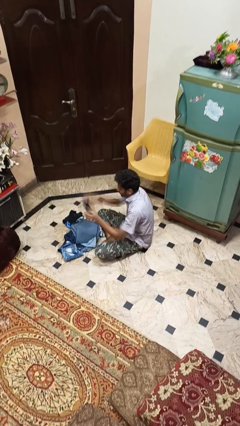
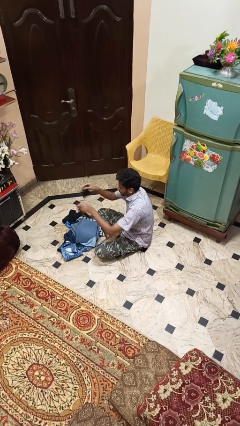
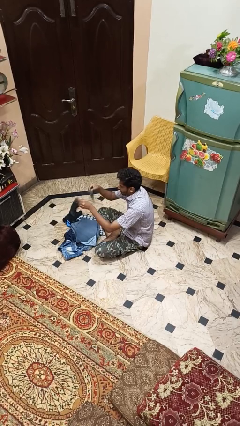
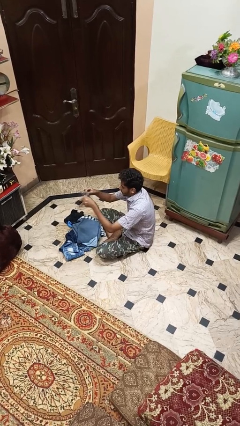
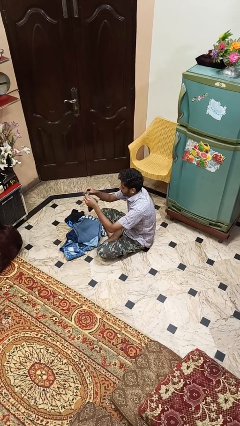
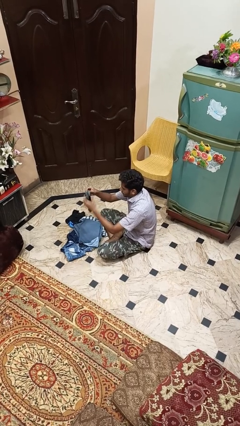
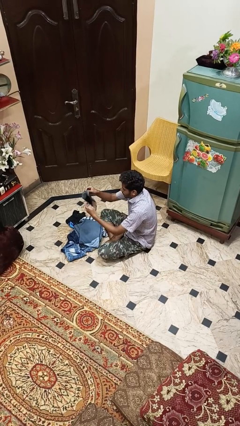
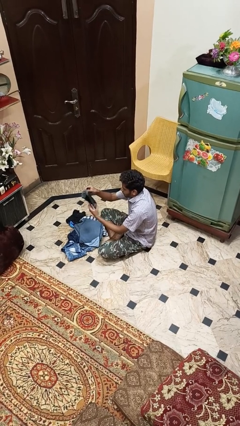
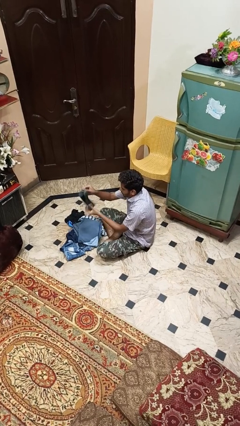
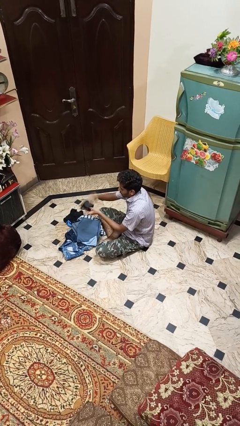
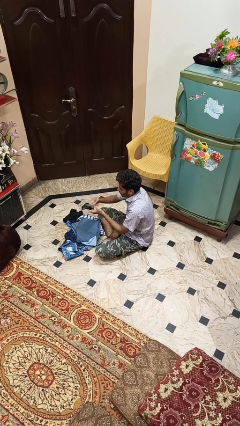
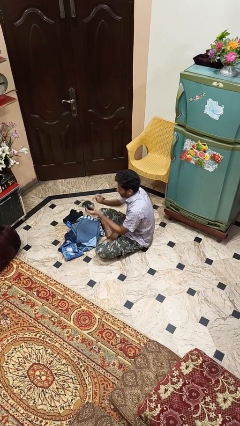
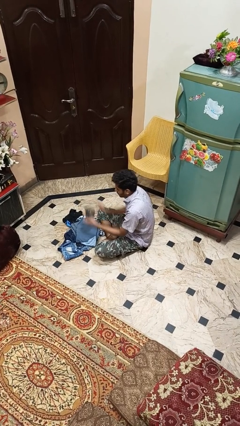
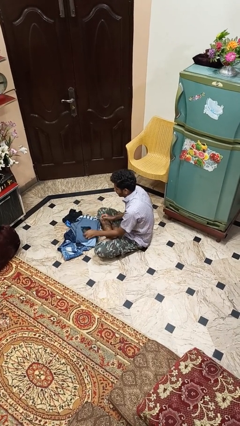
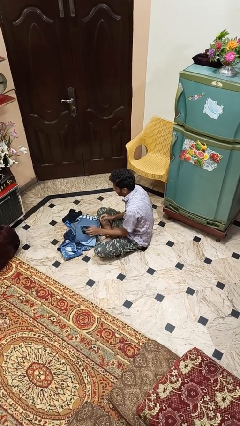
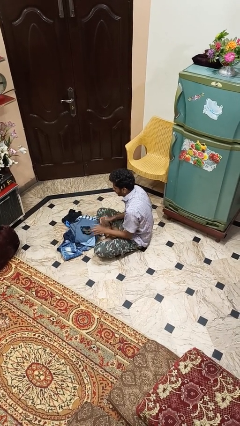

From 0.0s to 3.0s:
person folds socks

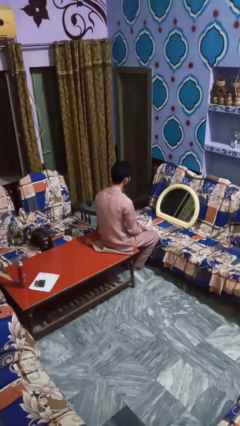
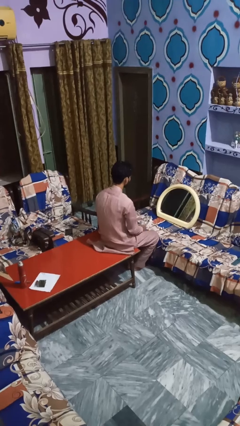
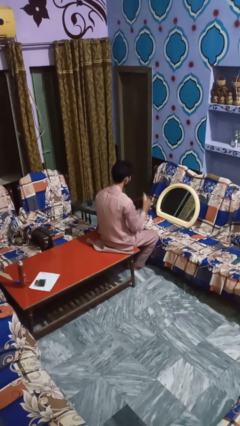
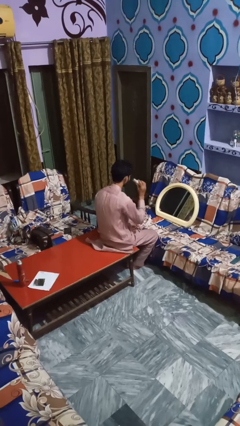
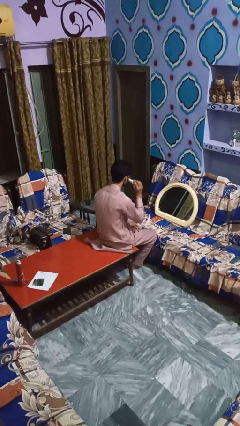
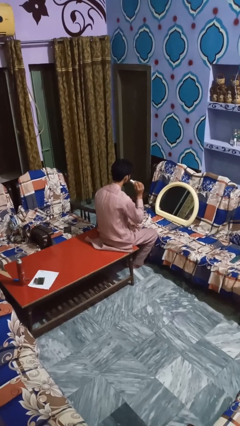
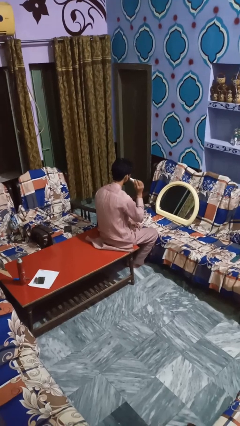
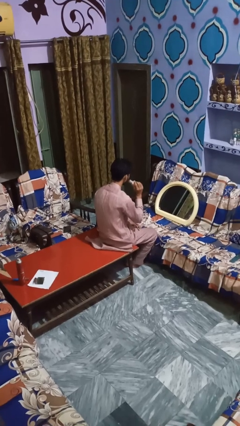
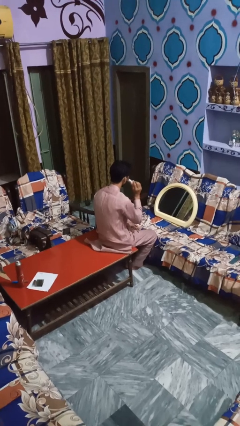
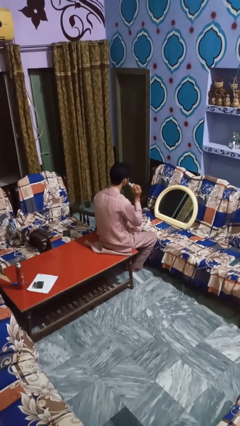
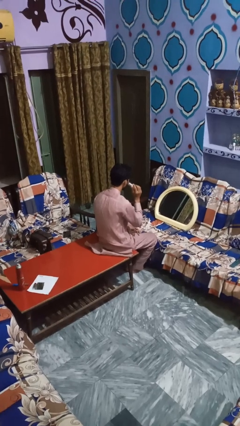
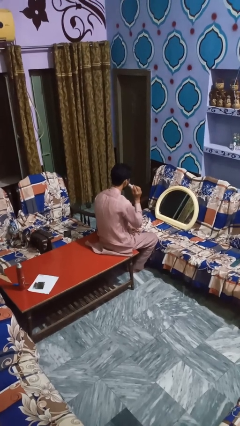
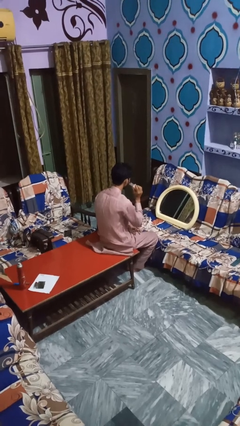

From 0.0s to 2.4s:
person applies foundation makeup

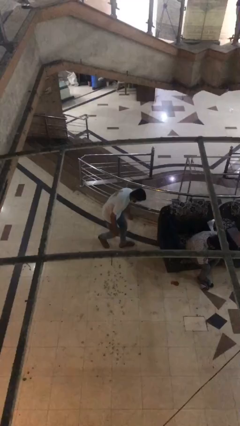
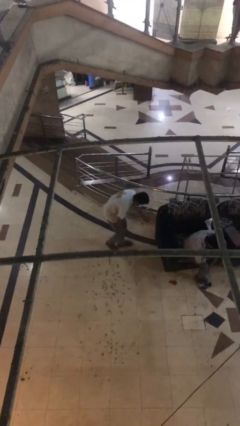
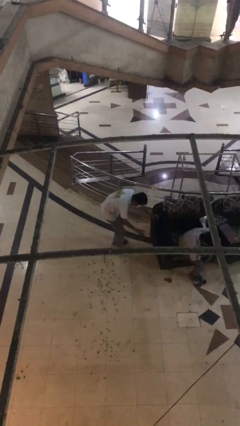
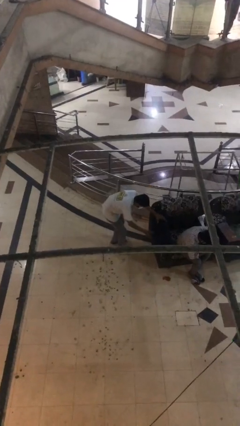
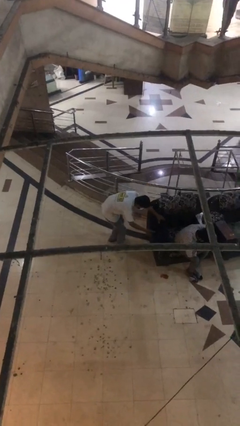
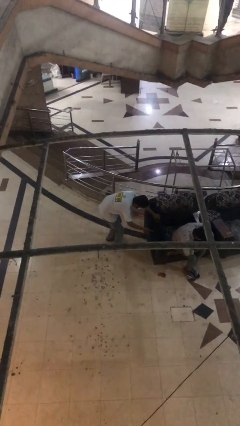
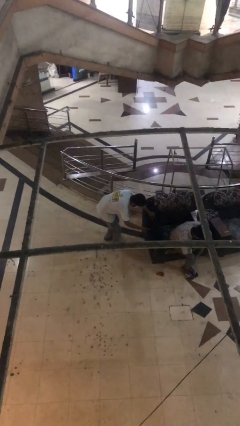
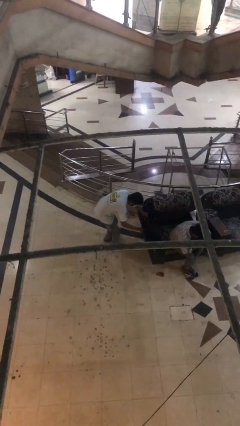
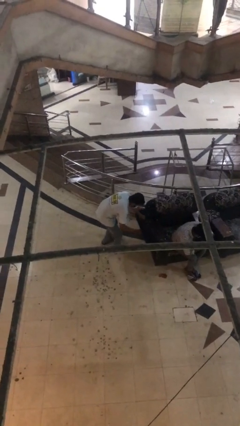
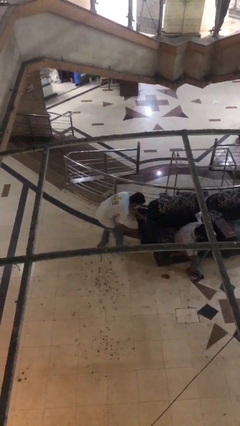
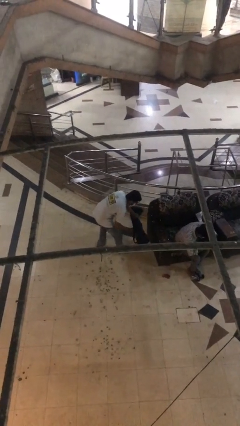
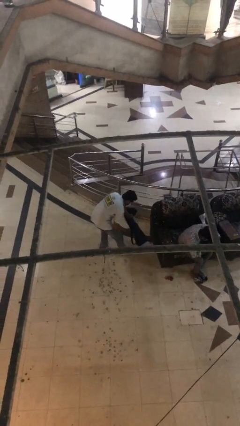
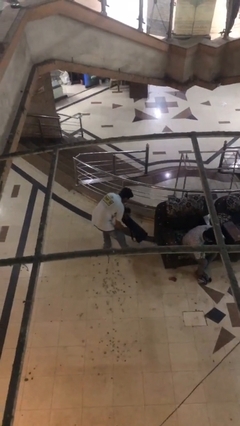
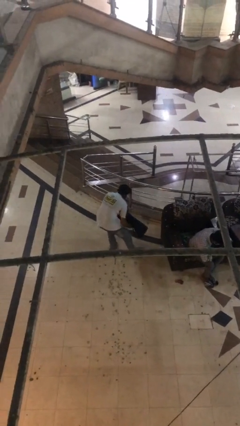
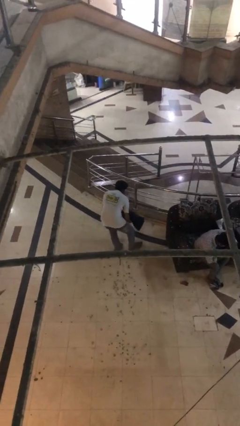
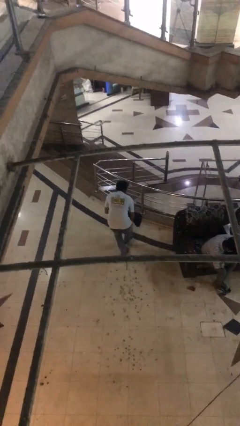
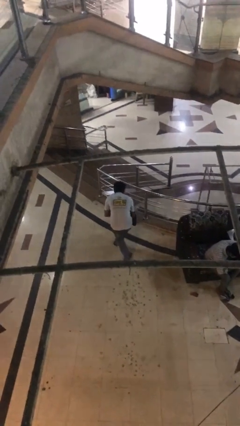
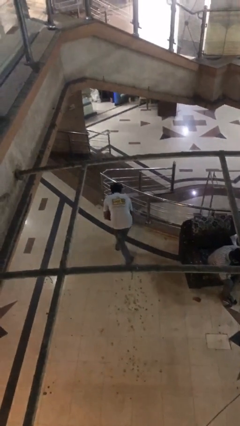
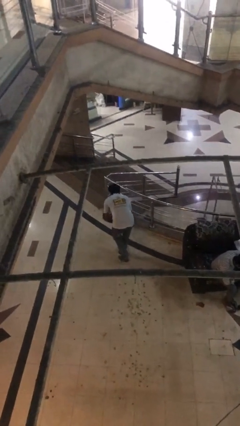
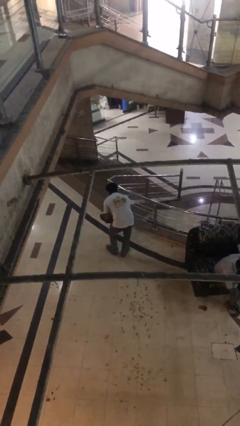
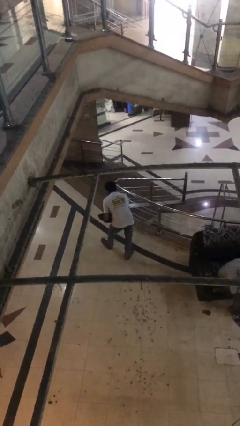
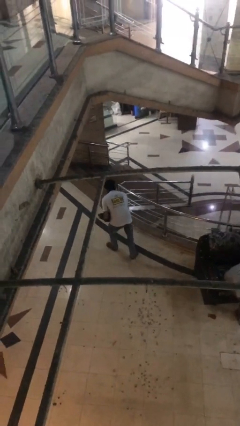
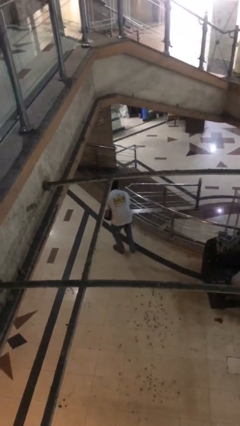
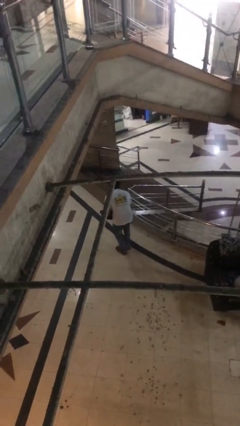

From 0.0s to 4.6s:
person steals object from person

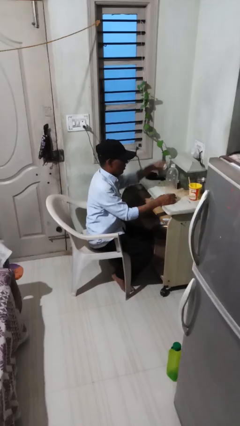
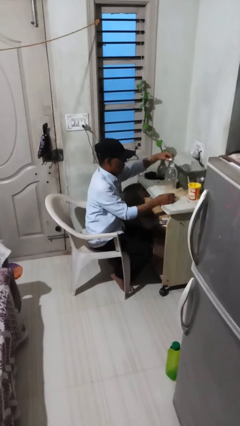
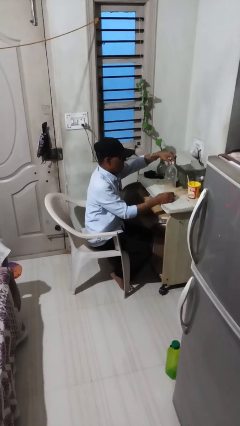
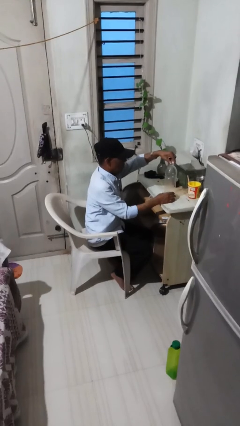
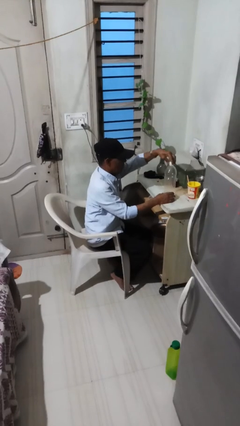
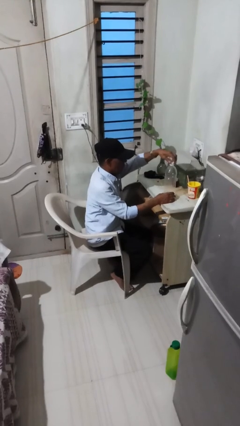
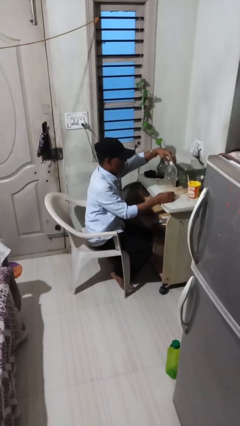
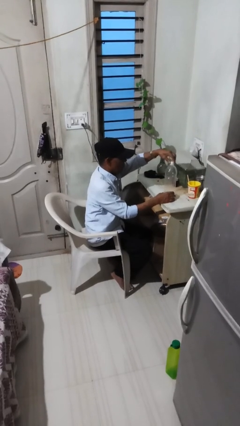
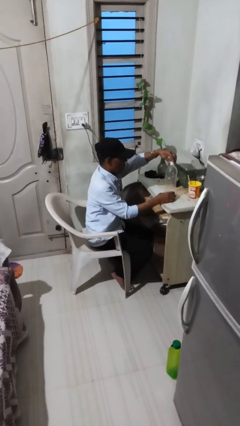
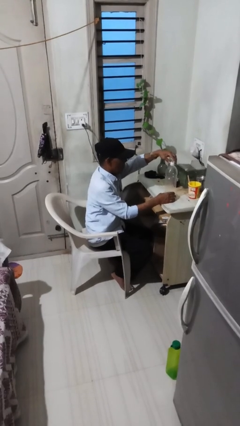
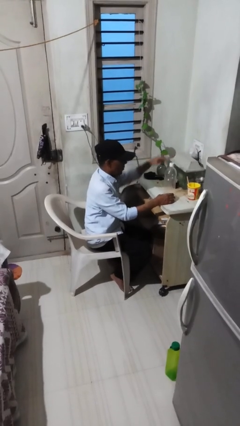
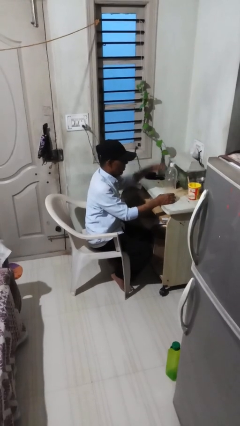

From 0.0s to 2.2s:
person screws lid to bottle

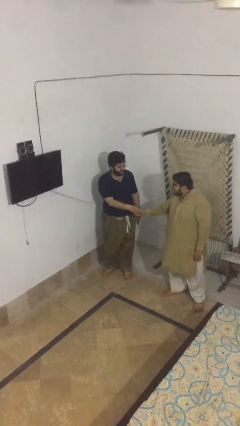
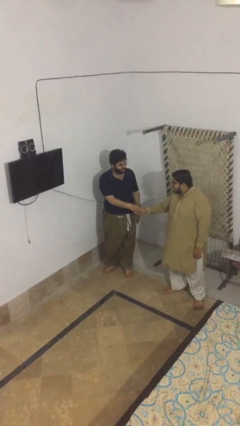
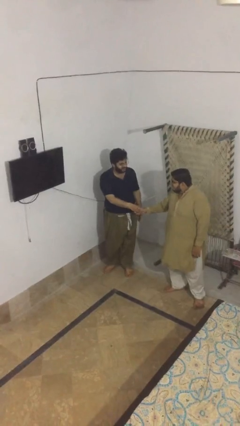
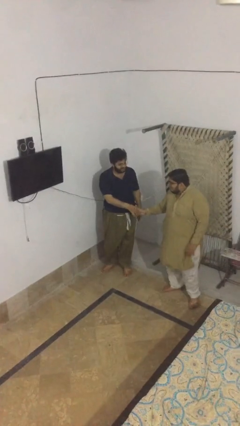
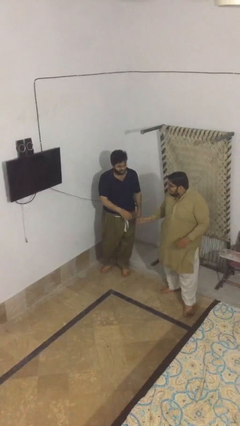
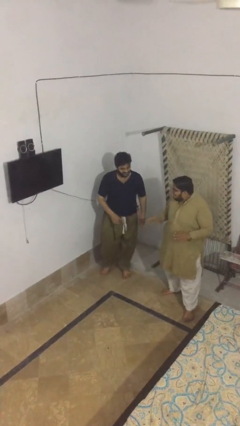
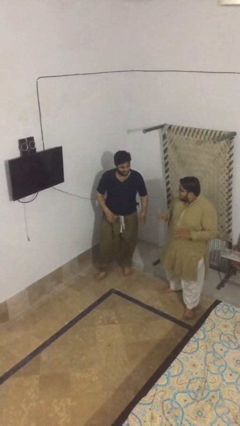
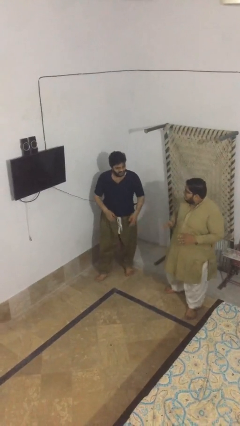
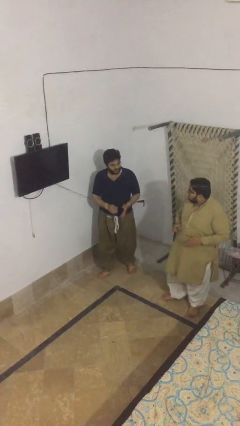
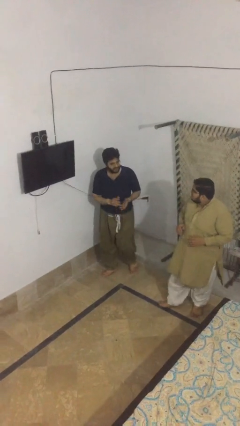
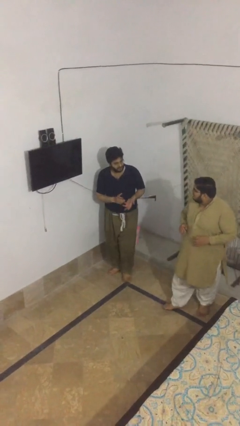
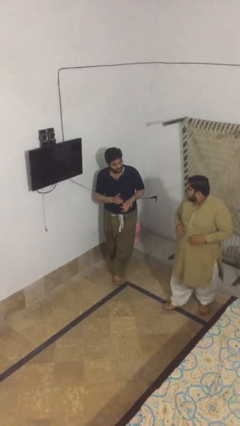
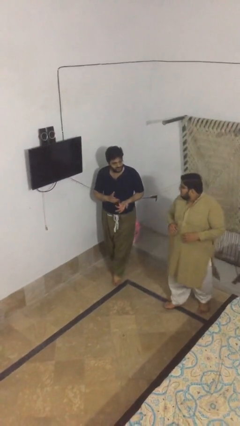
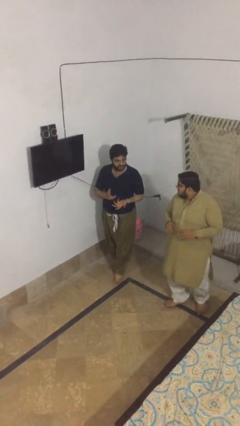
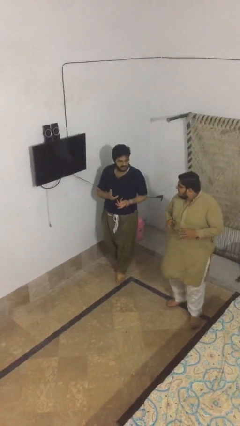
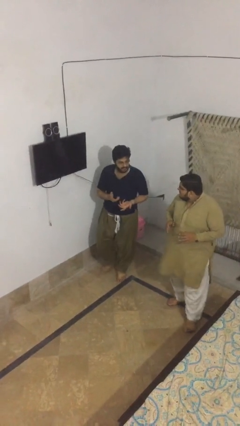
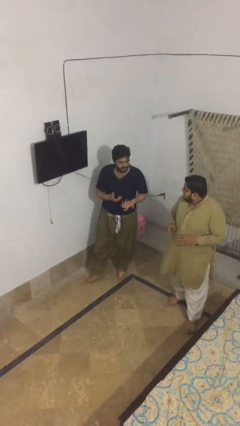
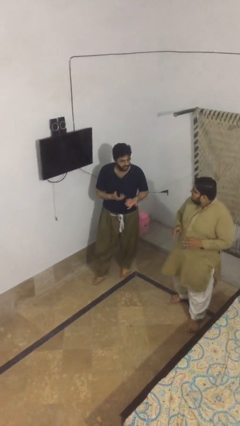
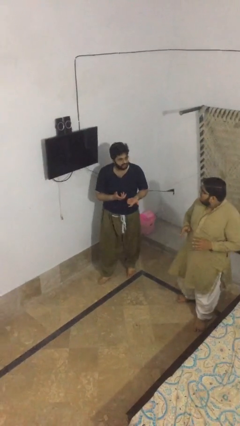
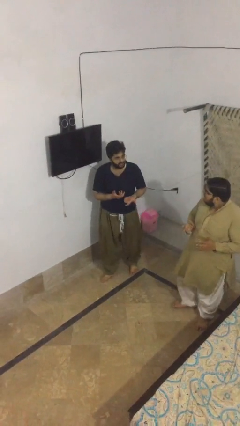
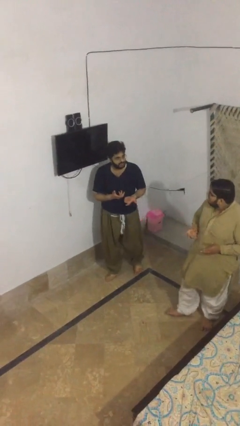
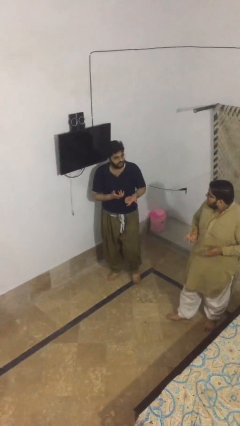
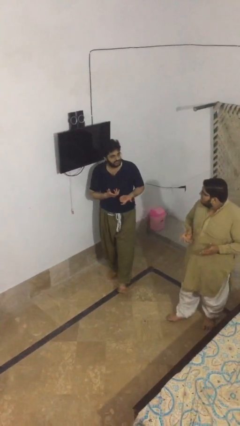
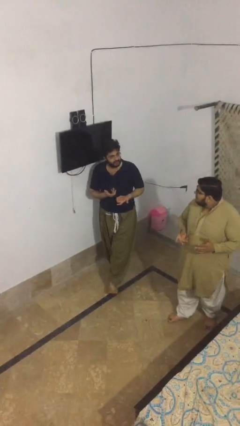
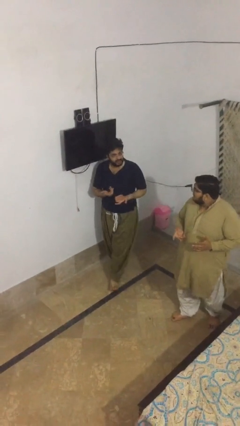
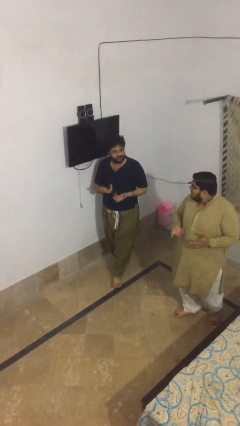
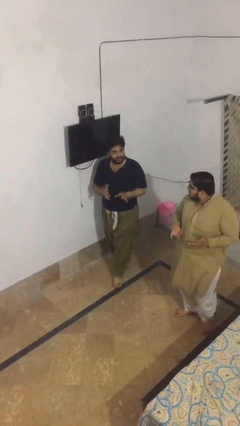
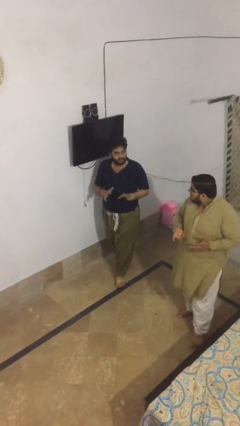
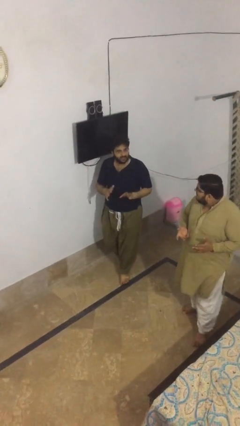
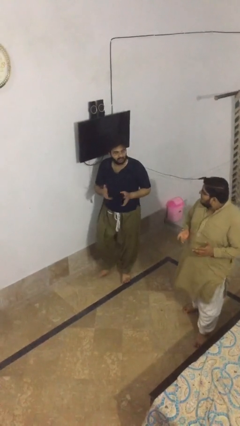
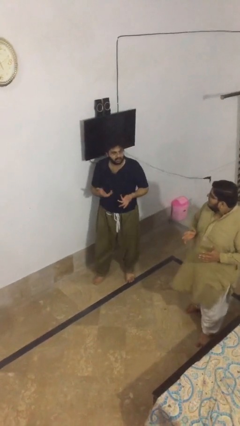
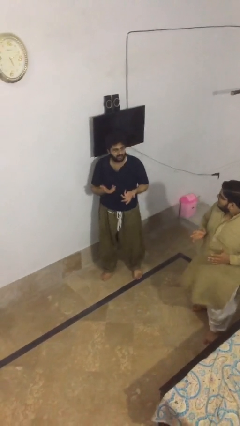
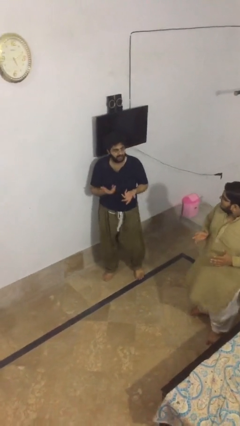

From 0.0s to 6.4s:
person talks to person
